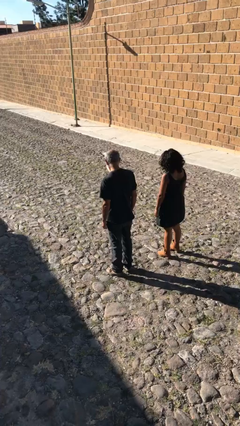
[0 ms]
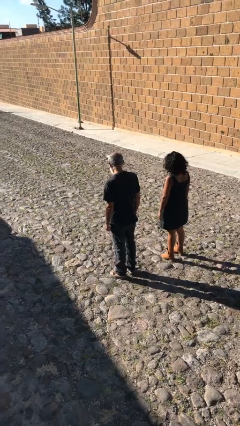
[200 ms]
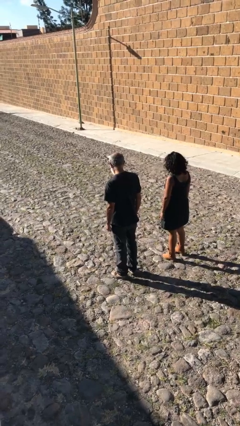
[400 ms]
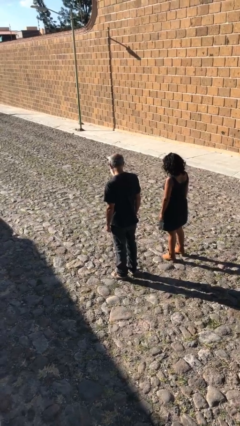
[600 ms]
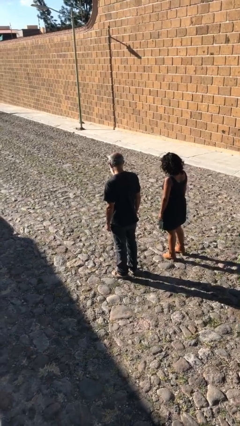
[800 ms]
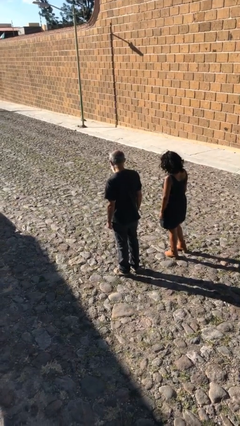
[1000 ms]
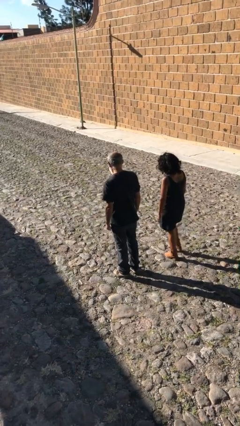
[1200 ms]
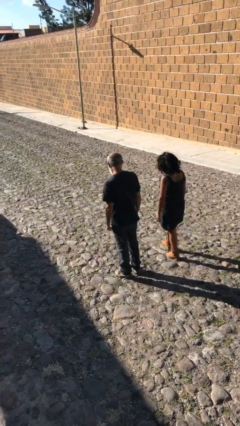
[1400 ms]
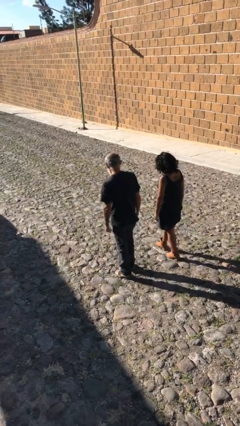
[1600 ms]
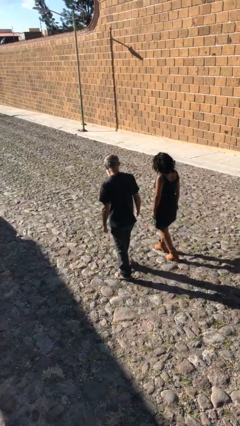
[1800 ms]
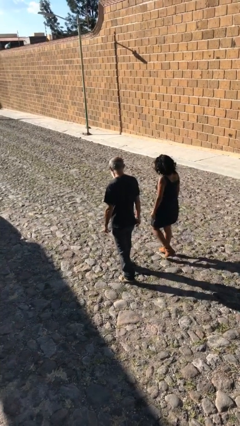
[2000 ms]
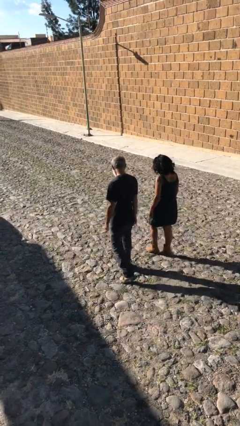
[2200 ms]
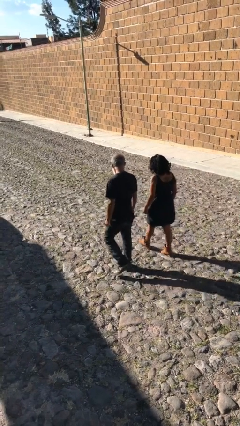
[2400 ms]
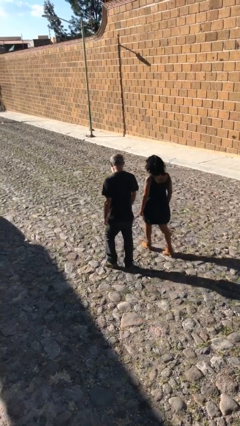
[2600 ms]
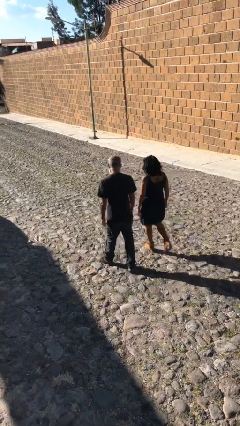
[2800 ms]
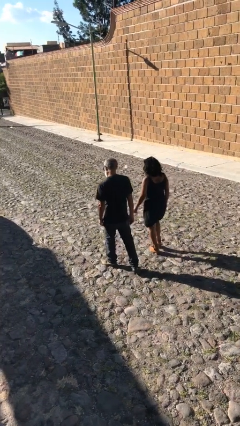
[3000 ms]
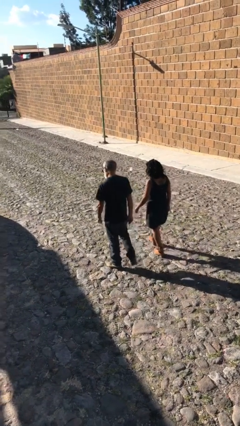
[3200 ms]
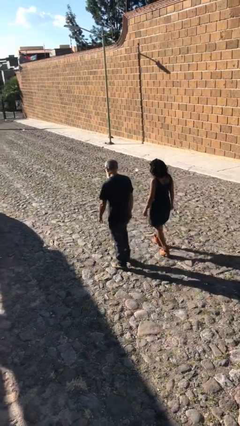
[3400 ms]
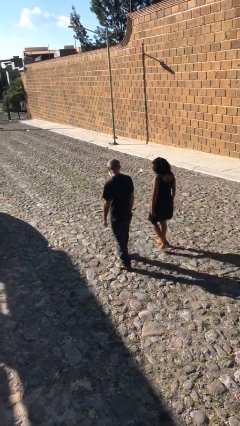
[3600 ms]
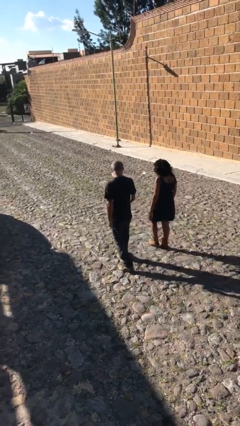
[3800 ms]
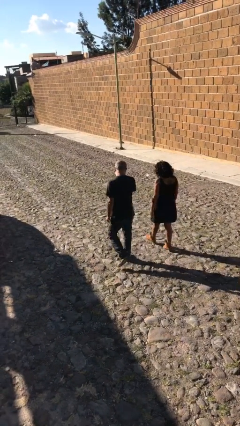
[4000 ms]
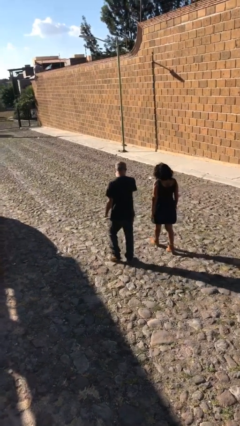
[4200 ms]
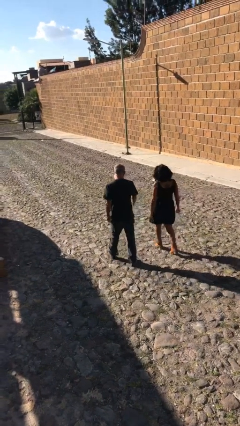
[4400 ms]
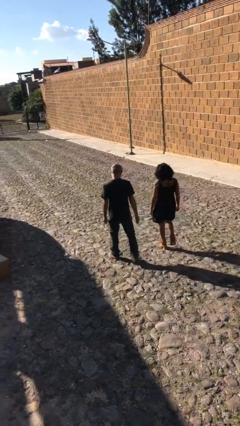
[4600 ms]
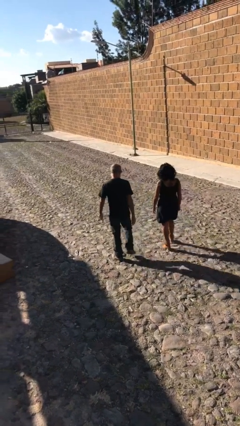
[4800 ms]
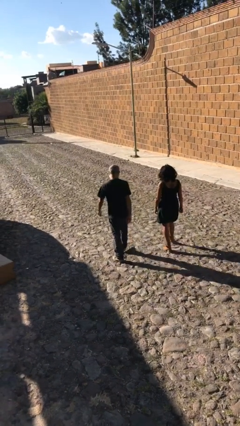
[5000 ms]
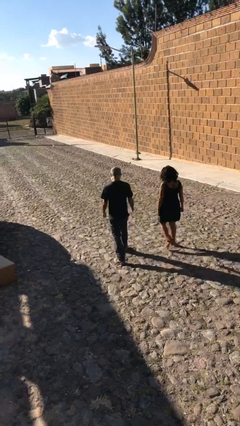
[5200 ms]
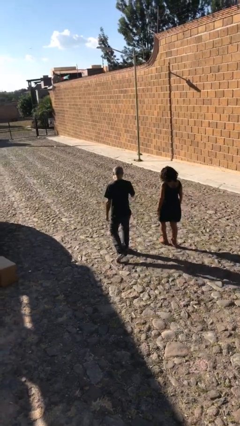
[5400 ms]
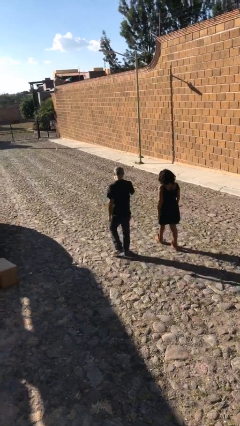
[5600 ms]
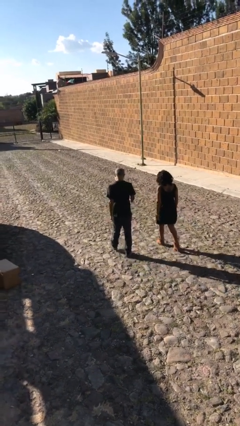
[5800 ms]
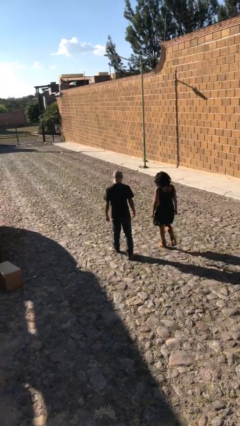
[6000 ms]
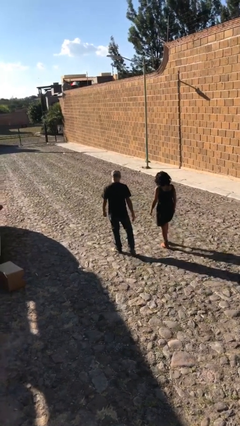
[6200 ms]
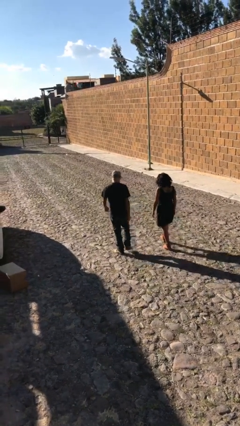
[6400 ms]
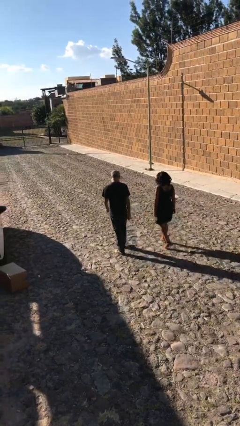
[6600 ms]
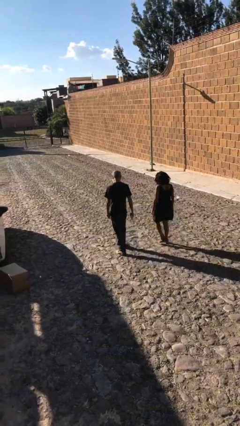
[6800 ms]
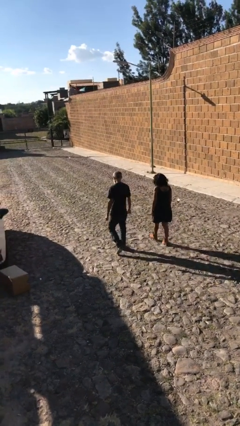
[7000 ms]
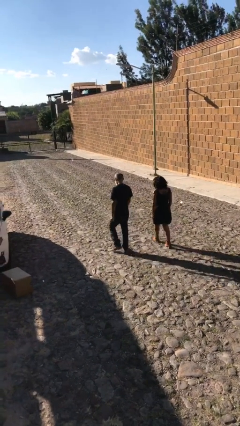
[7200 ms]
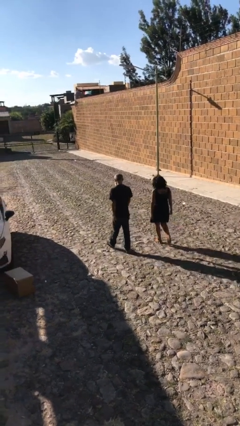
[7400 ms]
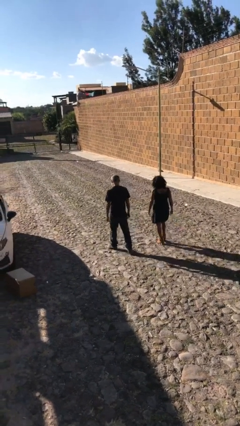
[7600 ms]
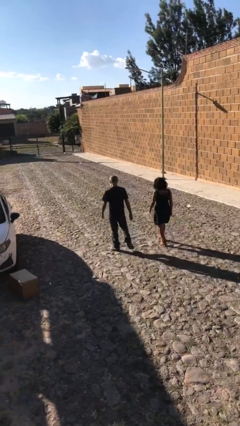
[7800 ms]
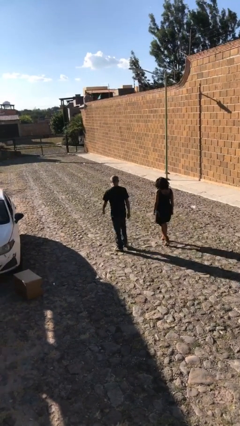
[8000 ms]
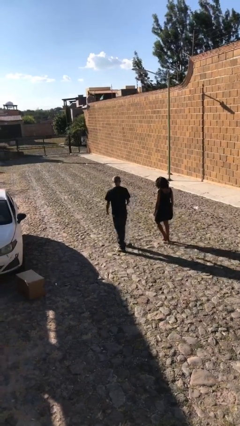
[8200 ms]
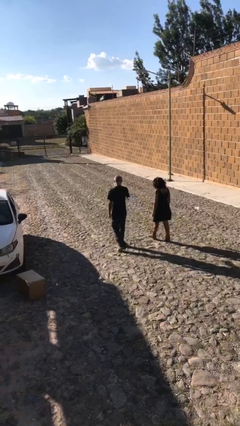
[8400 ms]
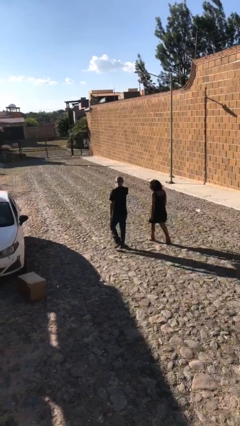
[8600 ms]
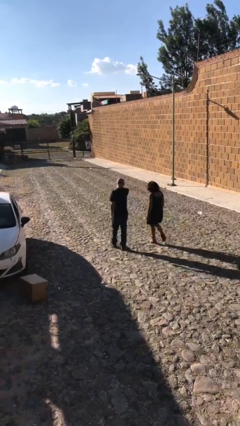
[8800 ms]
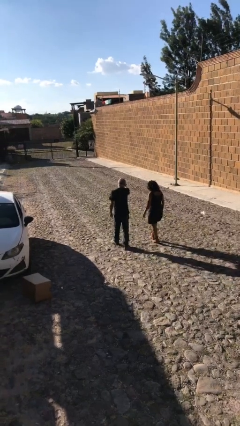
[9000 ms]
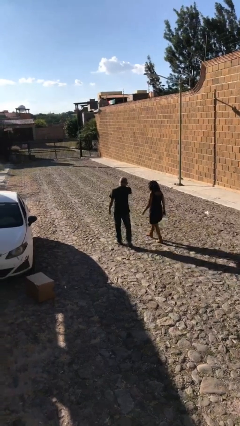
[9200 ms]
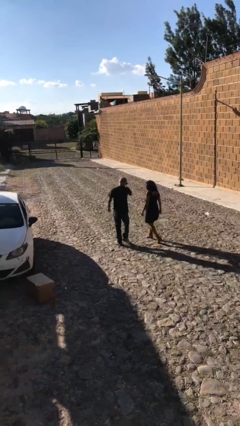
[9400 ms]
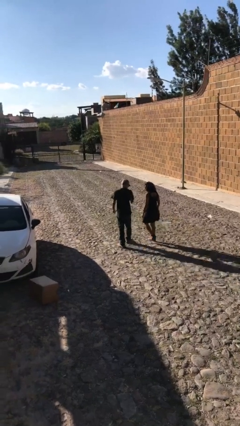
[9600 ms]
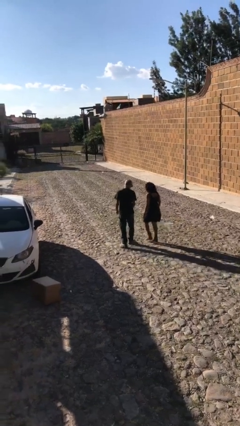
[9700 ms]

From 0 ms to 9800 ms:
person talks to person

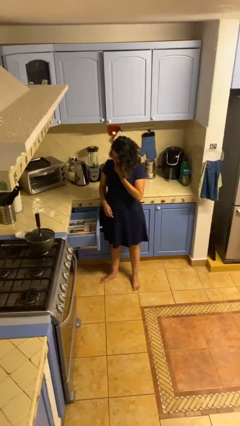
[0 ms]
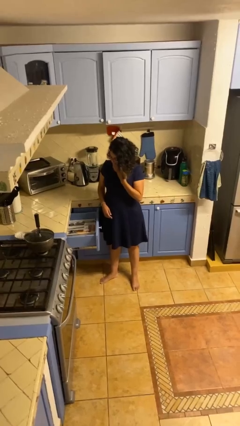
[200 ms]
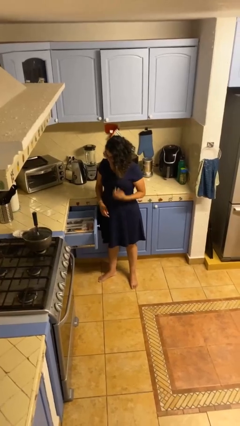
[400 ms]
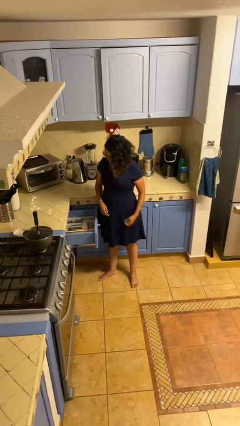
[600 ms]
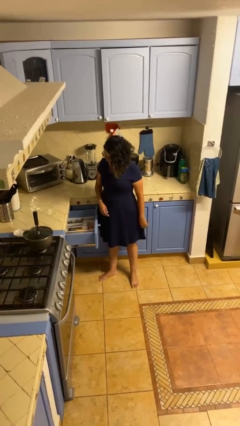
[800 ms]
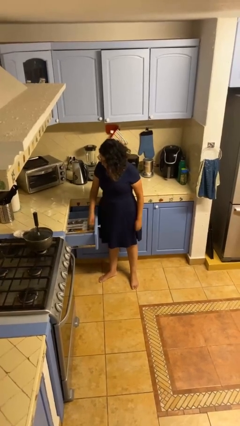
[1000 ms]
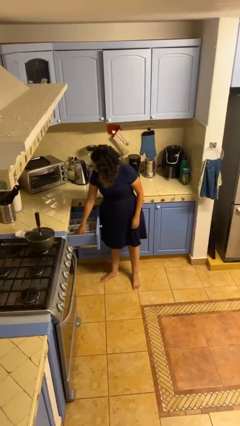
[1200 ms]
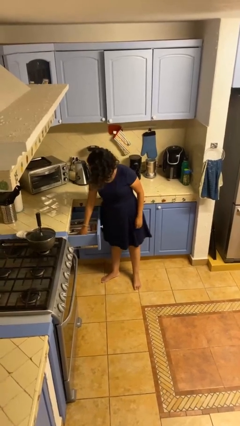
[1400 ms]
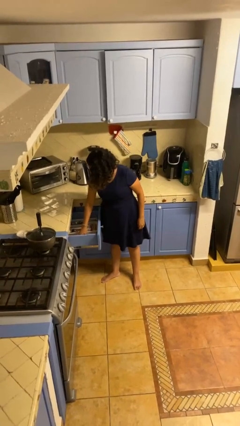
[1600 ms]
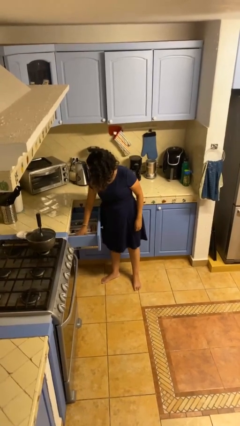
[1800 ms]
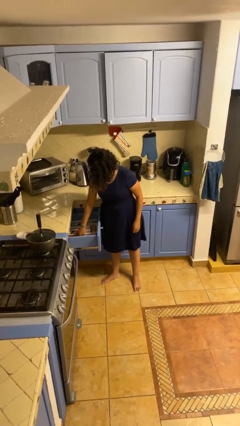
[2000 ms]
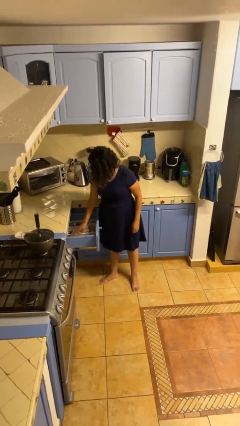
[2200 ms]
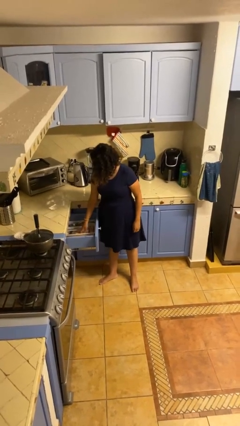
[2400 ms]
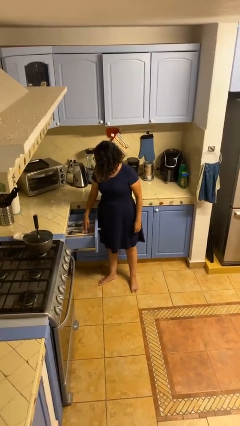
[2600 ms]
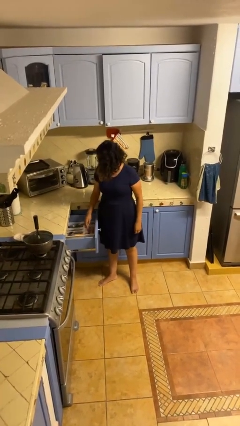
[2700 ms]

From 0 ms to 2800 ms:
person searches in kitchen drawer

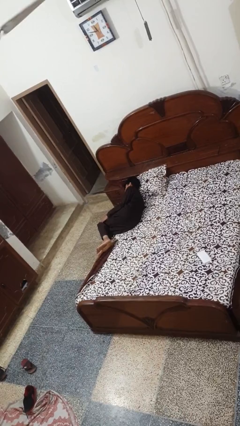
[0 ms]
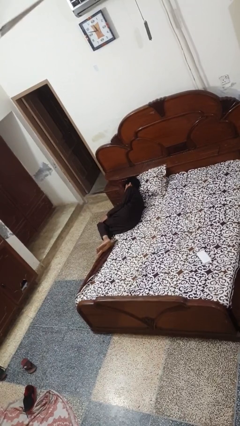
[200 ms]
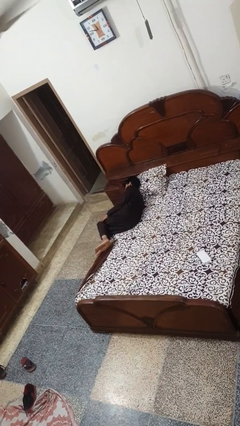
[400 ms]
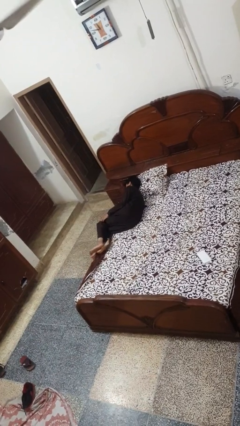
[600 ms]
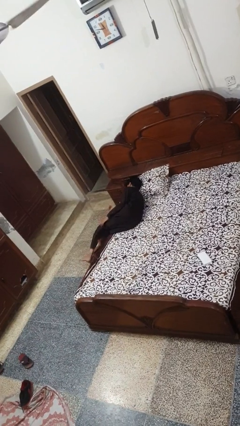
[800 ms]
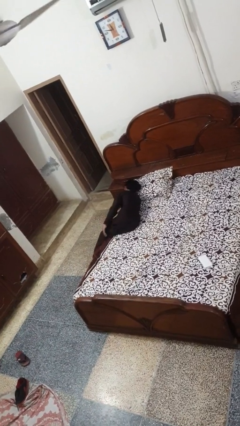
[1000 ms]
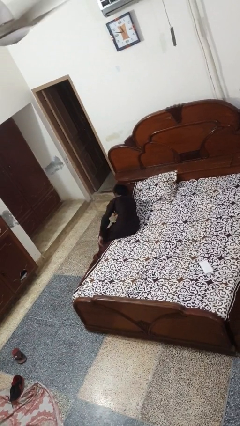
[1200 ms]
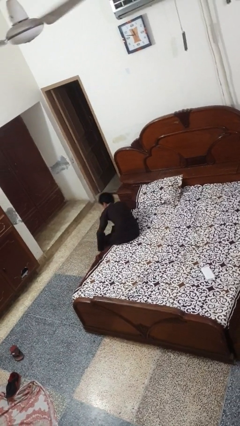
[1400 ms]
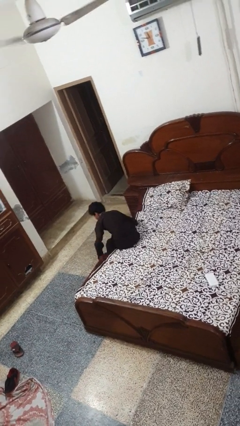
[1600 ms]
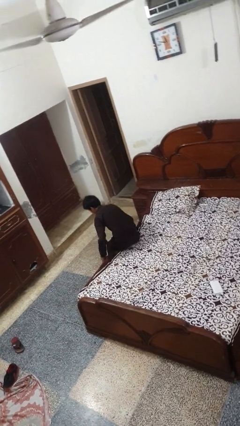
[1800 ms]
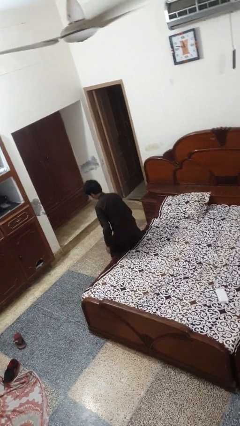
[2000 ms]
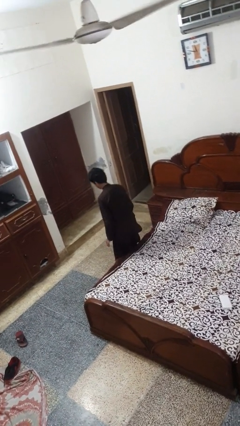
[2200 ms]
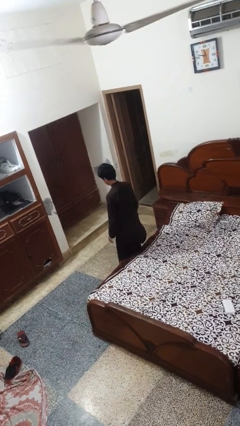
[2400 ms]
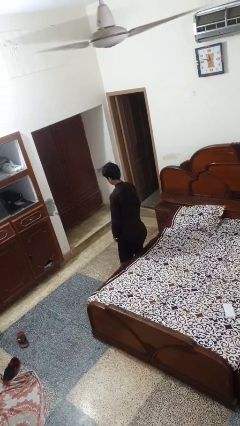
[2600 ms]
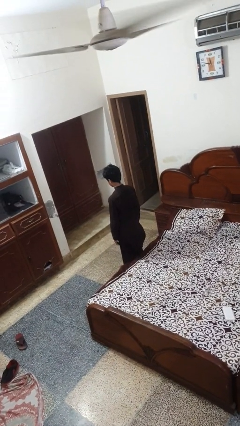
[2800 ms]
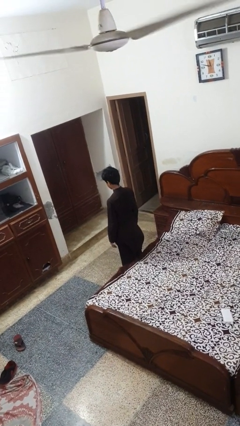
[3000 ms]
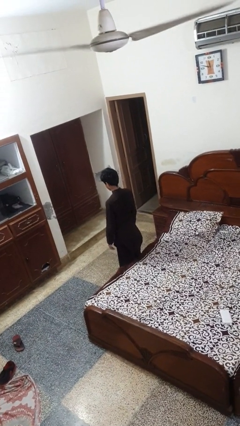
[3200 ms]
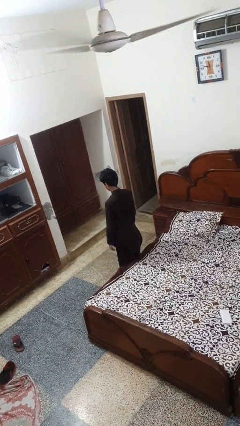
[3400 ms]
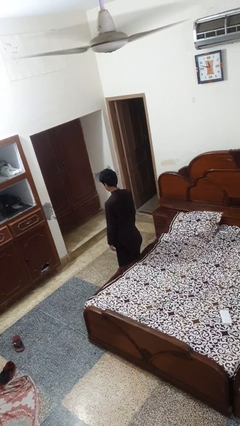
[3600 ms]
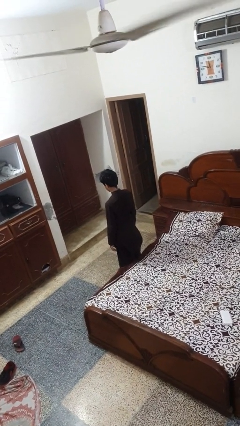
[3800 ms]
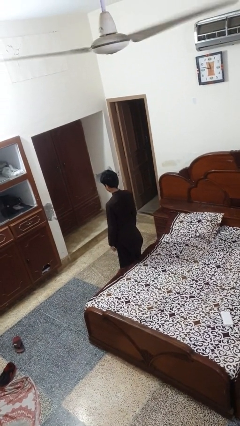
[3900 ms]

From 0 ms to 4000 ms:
person stands up

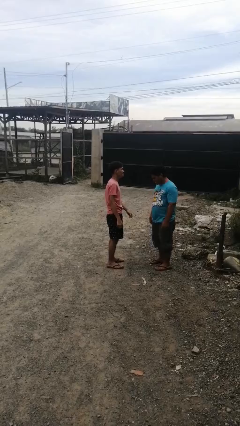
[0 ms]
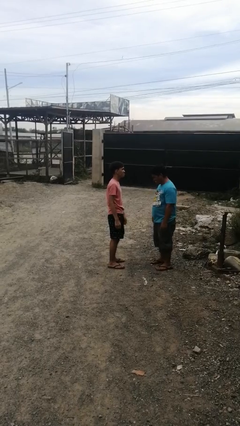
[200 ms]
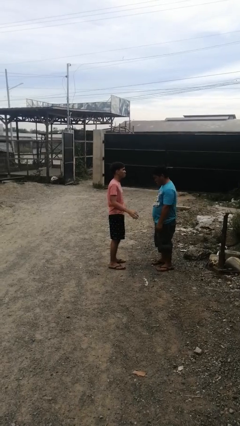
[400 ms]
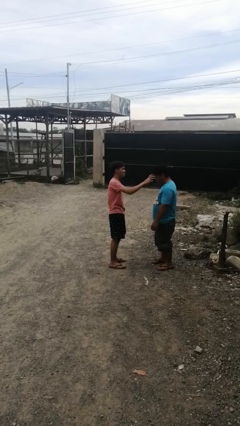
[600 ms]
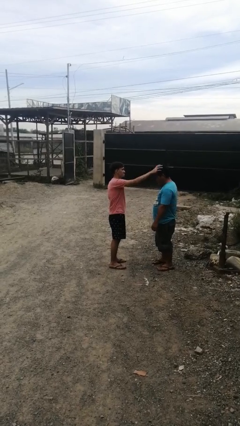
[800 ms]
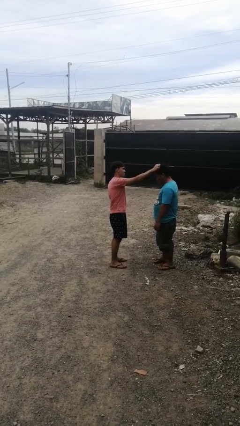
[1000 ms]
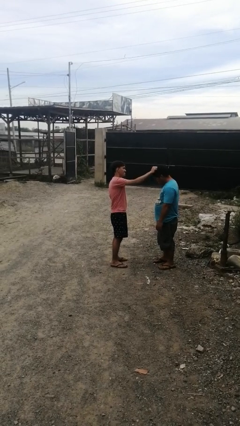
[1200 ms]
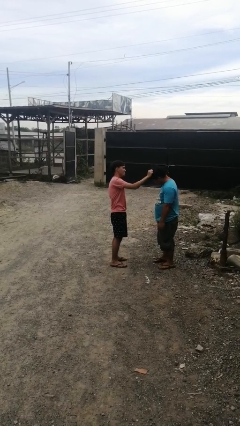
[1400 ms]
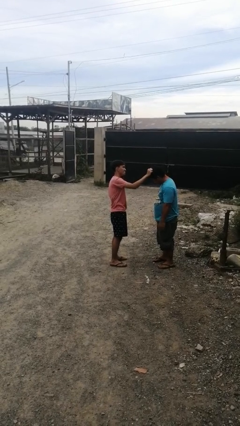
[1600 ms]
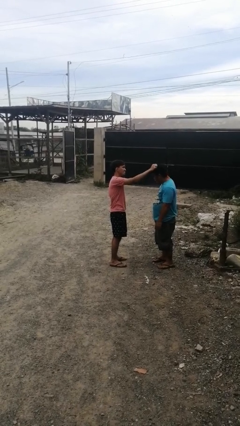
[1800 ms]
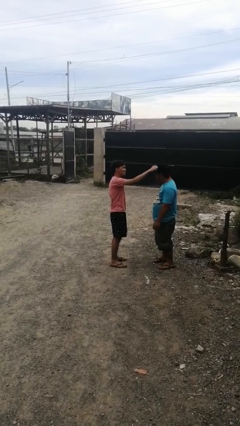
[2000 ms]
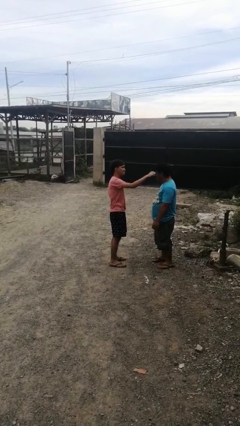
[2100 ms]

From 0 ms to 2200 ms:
person grabs person by hair
